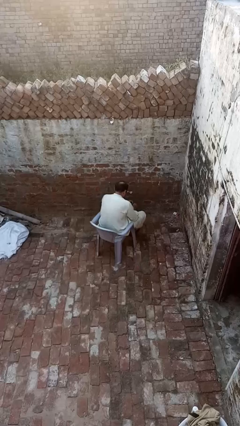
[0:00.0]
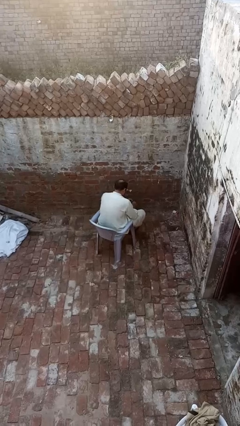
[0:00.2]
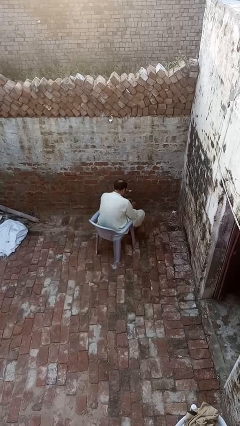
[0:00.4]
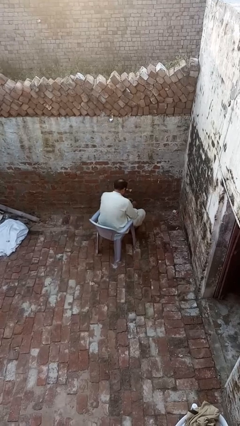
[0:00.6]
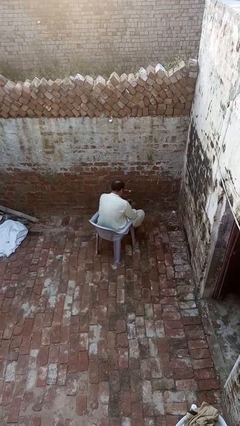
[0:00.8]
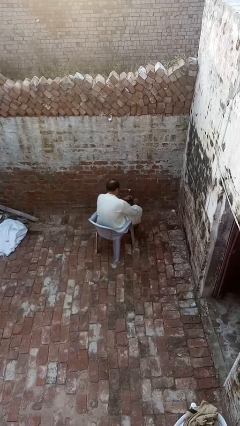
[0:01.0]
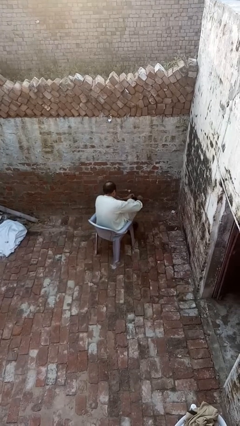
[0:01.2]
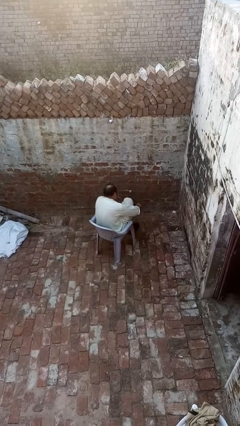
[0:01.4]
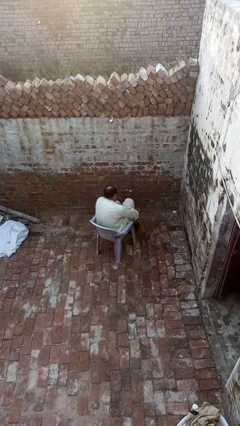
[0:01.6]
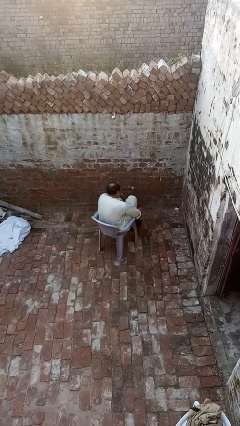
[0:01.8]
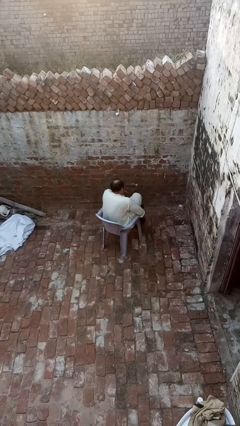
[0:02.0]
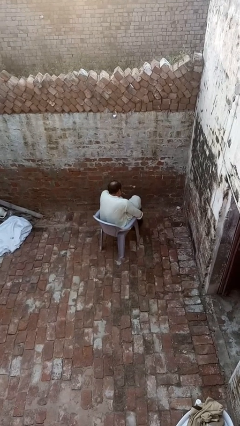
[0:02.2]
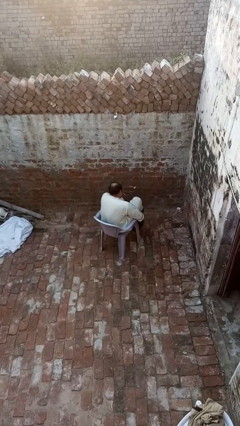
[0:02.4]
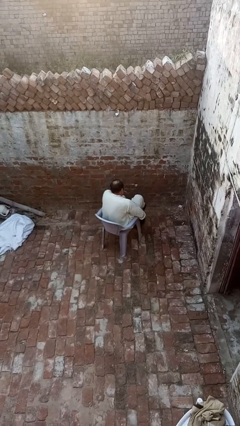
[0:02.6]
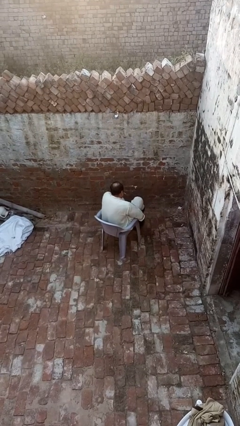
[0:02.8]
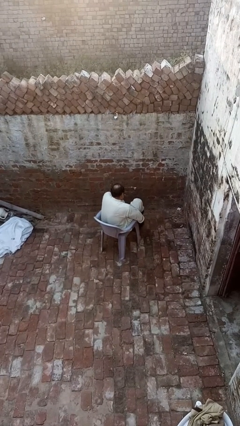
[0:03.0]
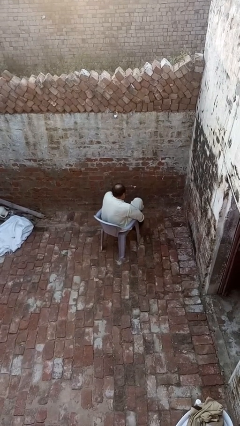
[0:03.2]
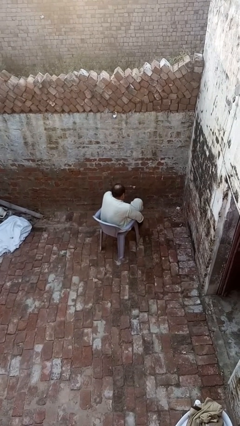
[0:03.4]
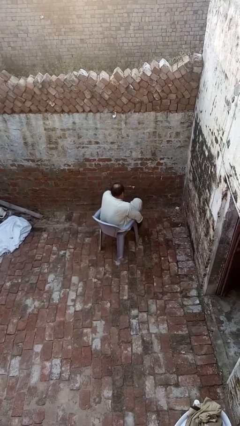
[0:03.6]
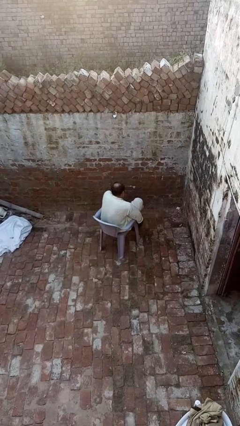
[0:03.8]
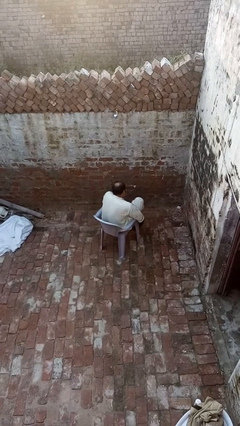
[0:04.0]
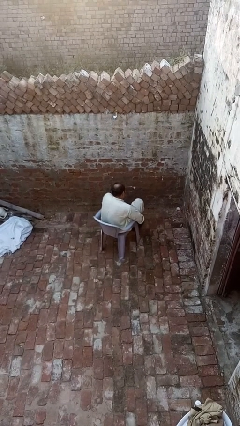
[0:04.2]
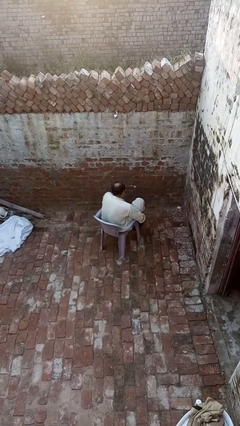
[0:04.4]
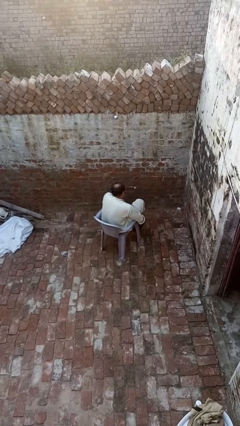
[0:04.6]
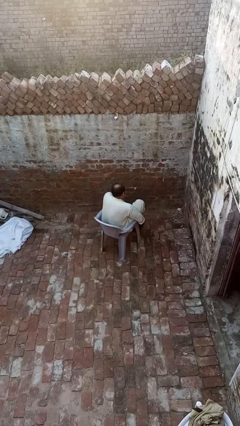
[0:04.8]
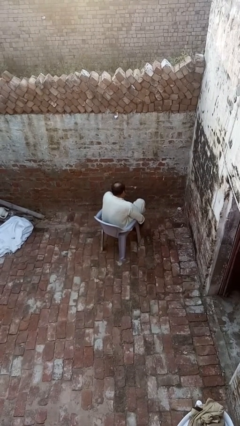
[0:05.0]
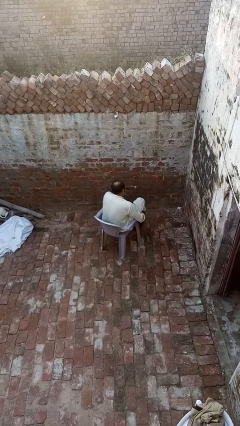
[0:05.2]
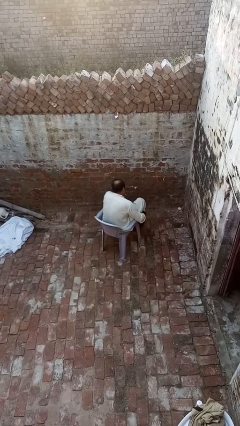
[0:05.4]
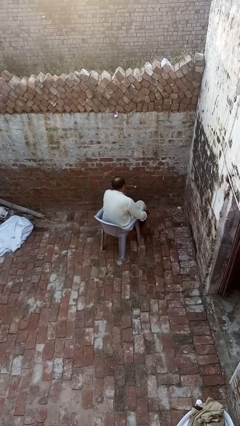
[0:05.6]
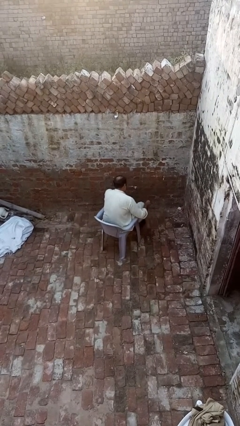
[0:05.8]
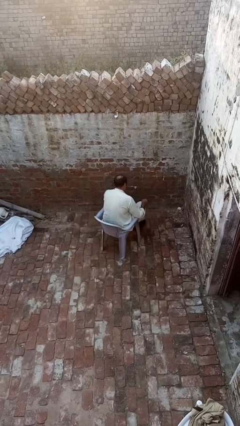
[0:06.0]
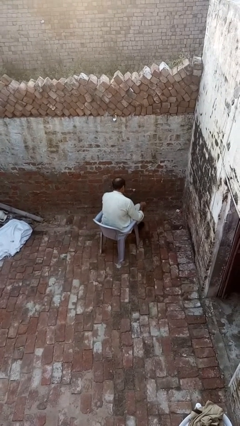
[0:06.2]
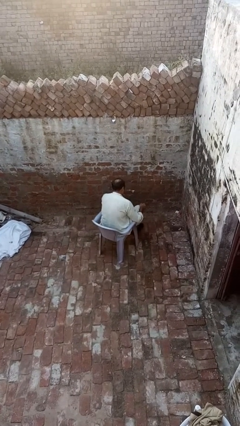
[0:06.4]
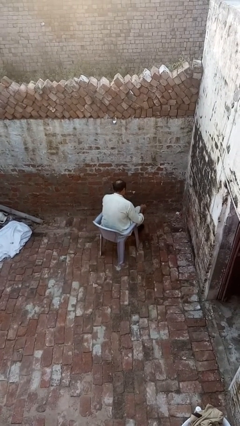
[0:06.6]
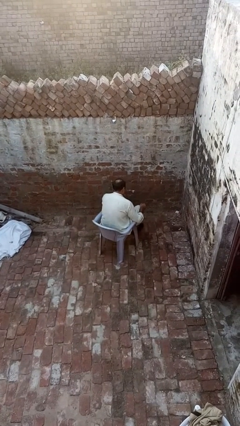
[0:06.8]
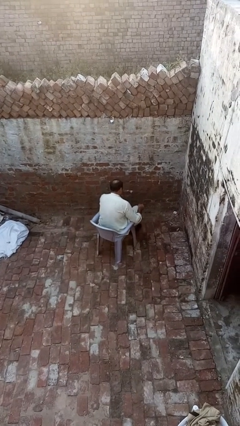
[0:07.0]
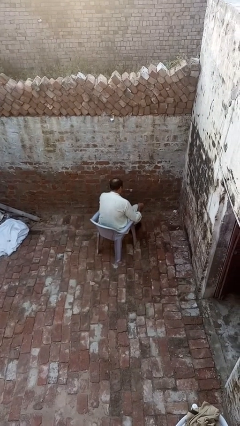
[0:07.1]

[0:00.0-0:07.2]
person puts on socks

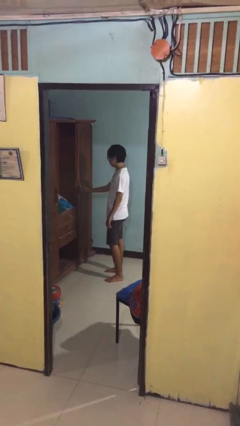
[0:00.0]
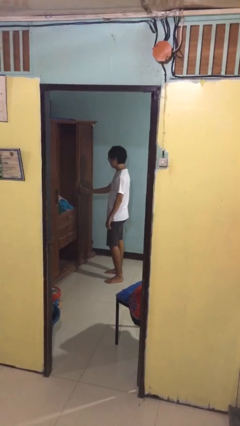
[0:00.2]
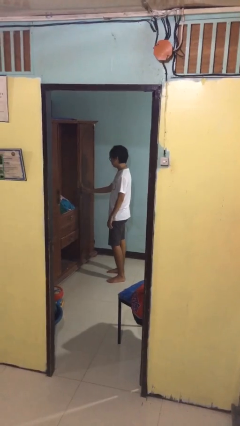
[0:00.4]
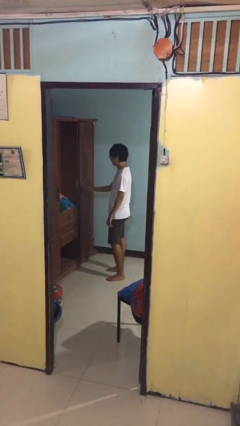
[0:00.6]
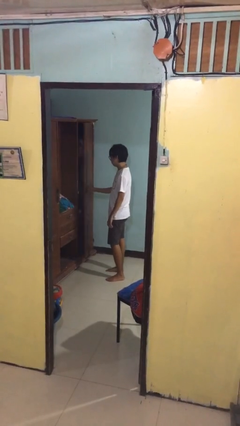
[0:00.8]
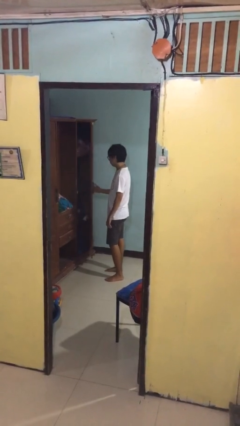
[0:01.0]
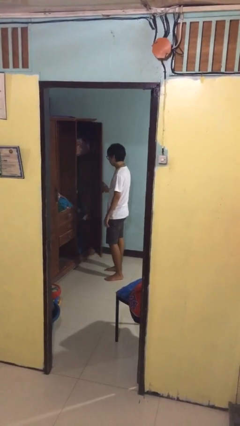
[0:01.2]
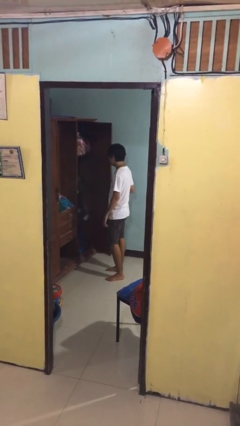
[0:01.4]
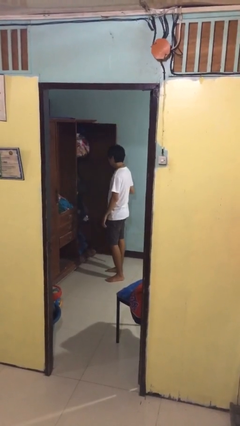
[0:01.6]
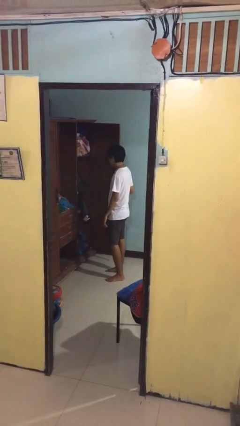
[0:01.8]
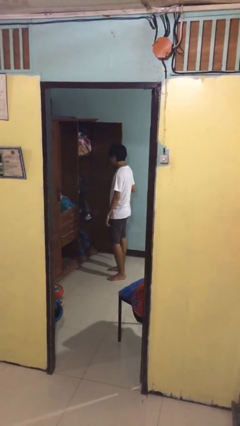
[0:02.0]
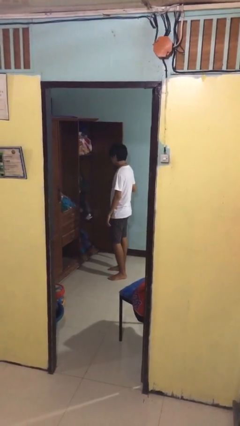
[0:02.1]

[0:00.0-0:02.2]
person opens closet door

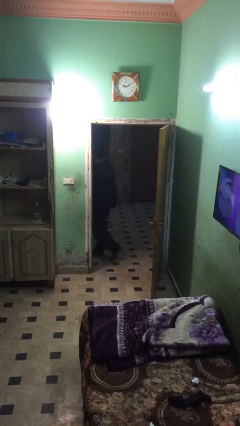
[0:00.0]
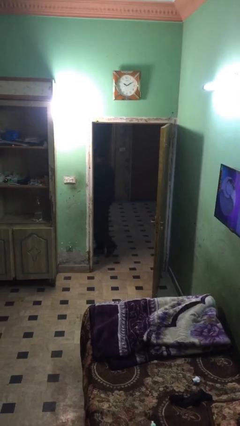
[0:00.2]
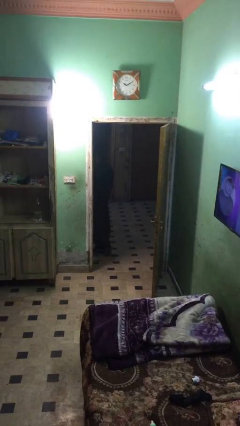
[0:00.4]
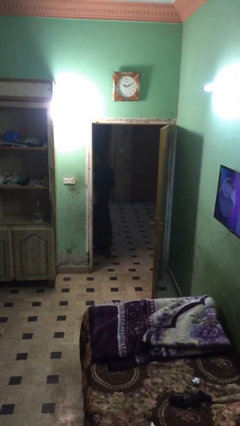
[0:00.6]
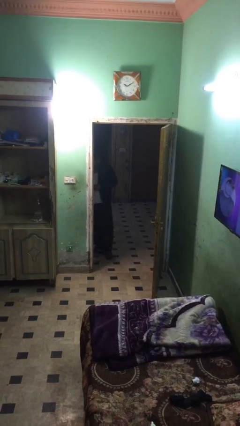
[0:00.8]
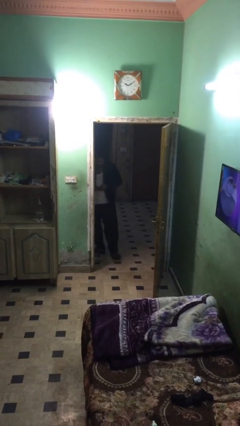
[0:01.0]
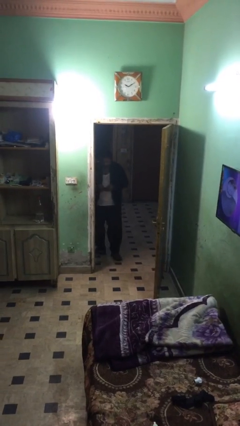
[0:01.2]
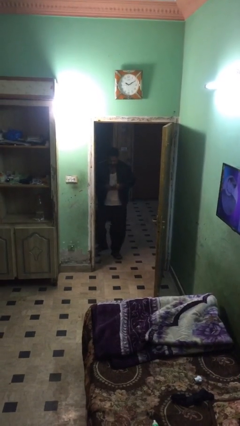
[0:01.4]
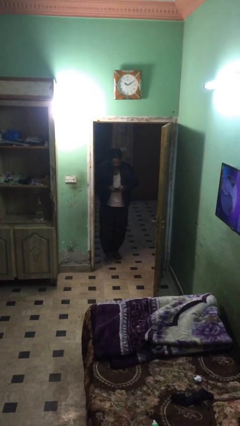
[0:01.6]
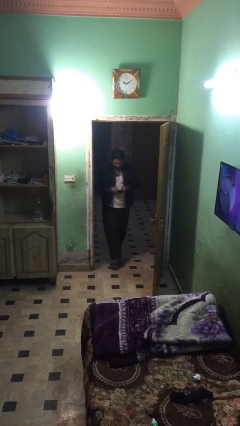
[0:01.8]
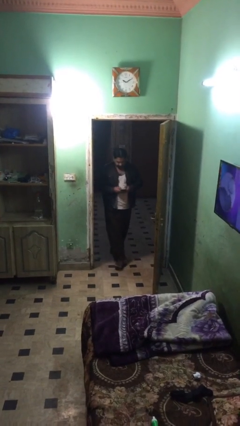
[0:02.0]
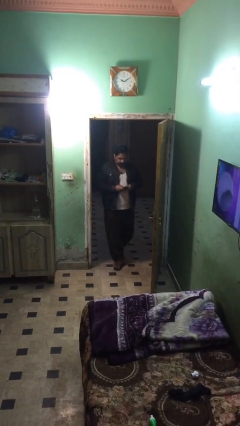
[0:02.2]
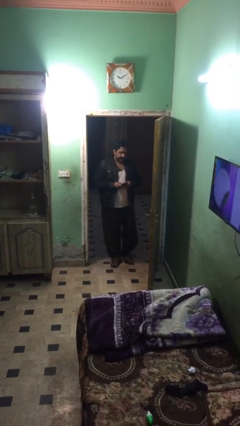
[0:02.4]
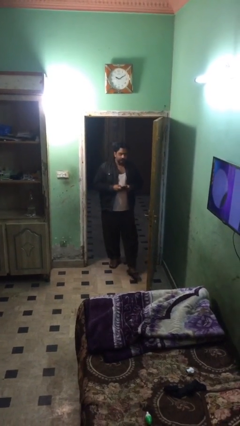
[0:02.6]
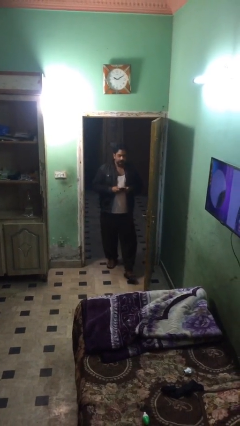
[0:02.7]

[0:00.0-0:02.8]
person enters scene through structure

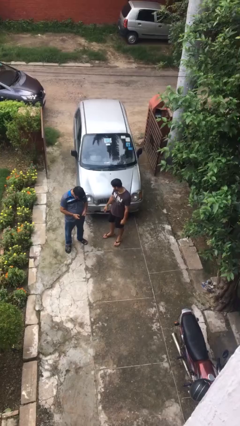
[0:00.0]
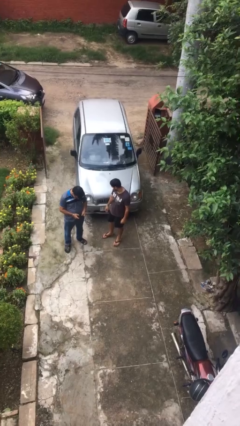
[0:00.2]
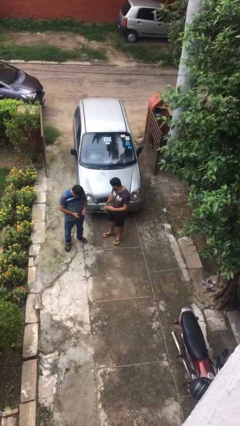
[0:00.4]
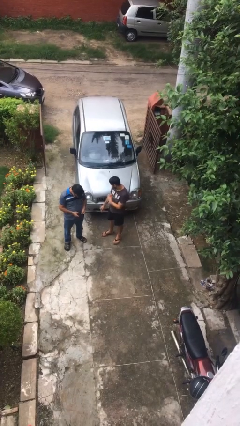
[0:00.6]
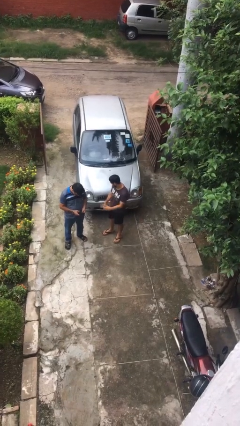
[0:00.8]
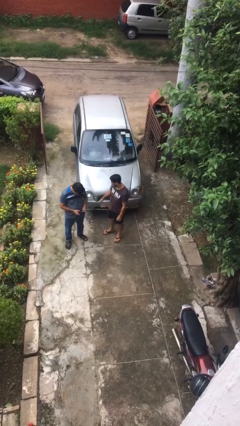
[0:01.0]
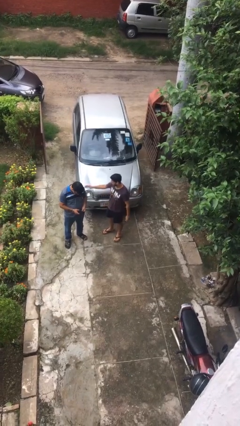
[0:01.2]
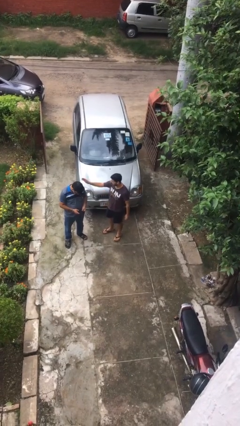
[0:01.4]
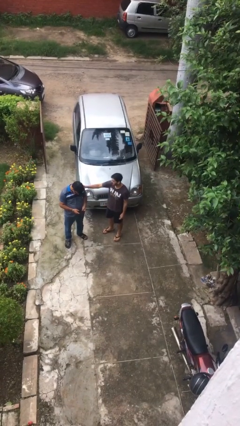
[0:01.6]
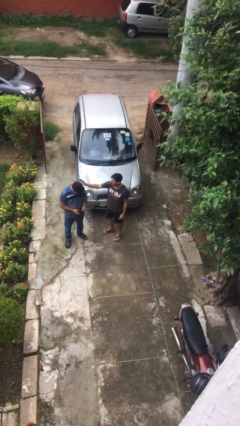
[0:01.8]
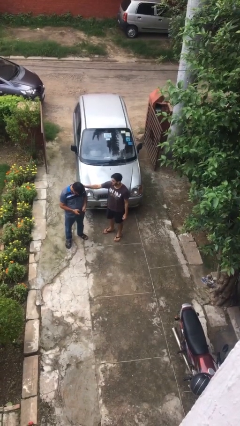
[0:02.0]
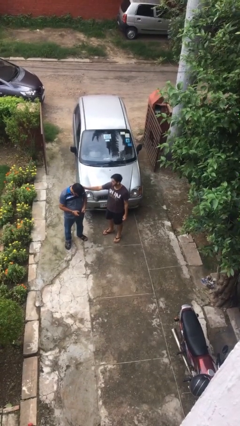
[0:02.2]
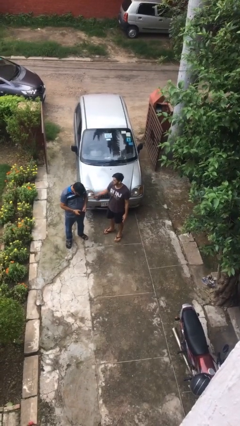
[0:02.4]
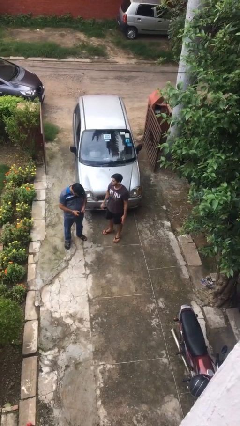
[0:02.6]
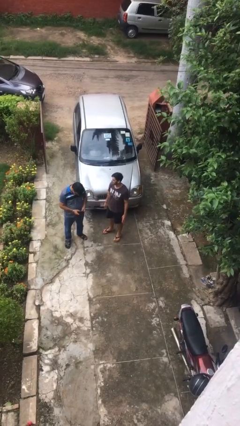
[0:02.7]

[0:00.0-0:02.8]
person pounds shoulders of person

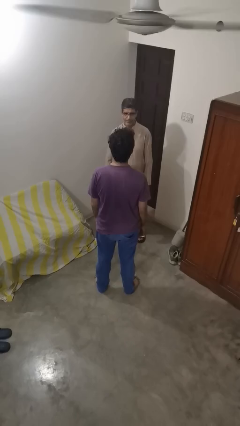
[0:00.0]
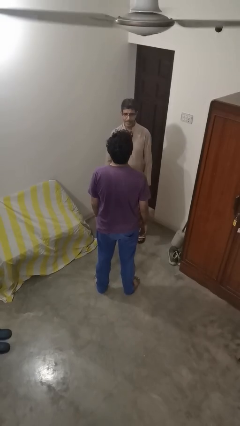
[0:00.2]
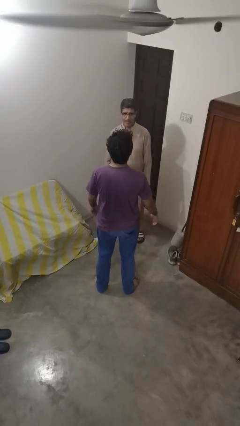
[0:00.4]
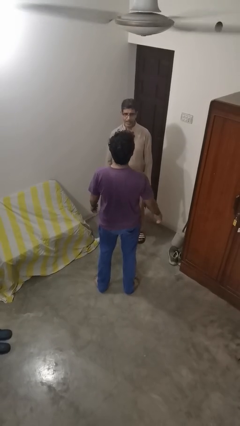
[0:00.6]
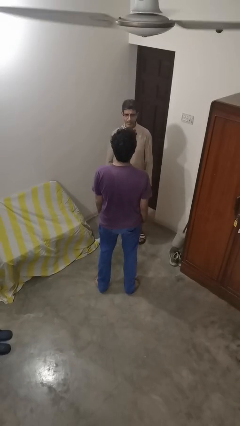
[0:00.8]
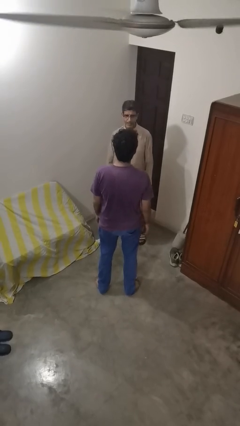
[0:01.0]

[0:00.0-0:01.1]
person laughs with person

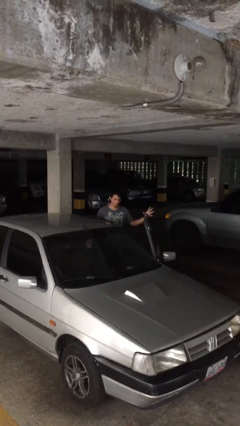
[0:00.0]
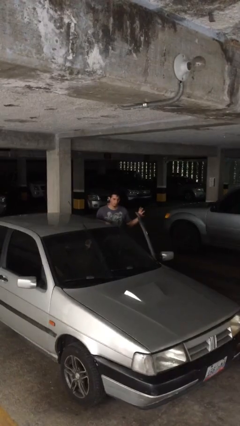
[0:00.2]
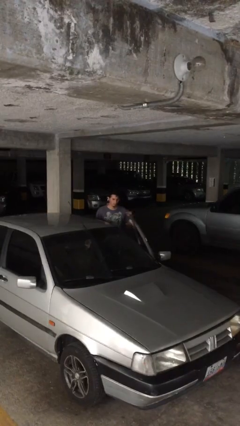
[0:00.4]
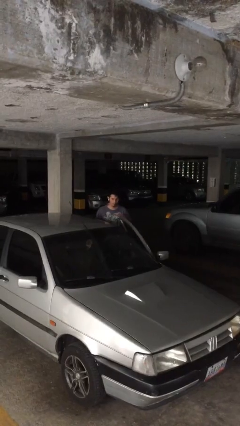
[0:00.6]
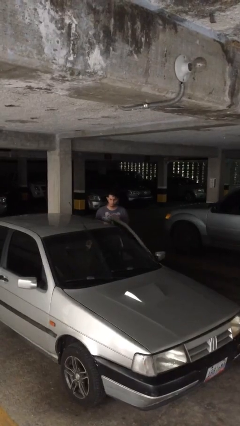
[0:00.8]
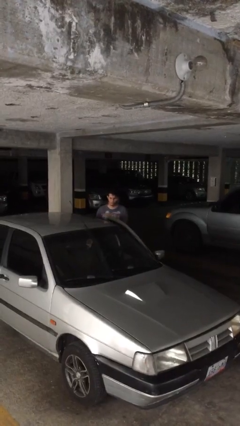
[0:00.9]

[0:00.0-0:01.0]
person closes car door
